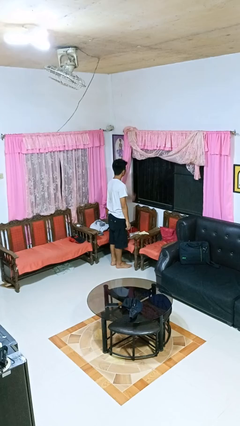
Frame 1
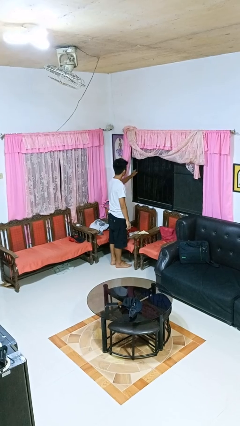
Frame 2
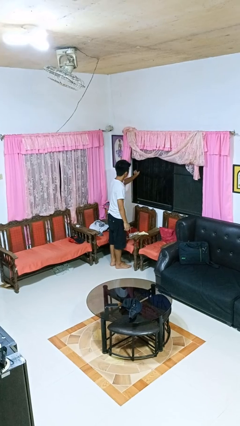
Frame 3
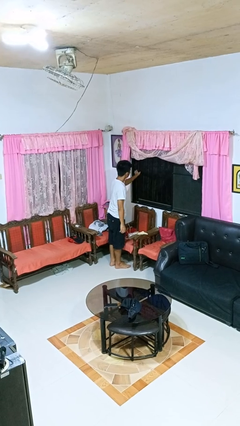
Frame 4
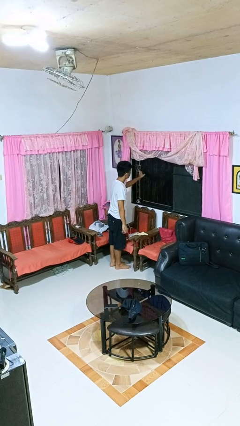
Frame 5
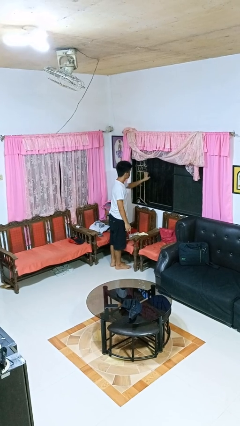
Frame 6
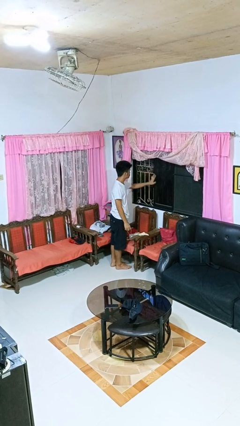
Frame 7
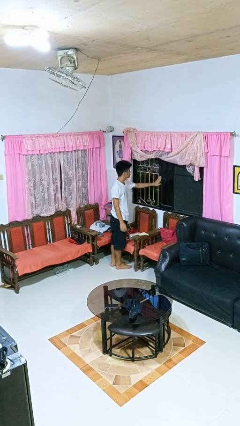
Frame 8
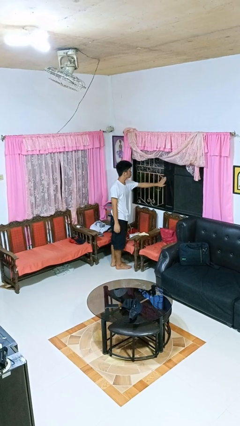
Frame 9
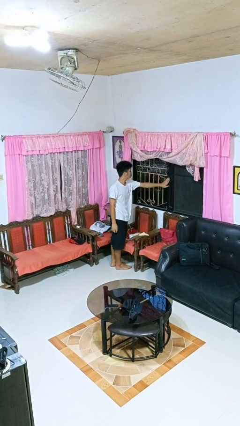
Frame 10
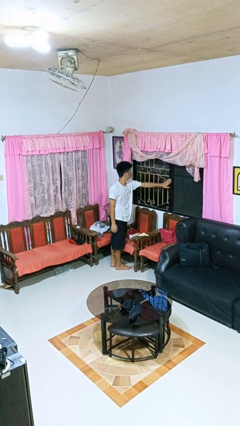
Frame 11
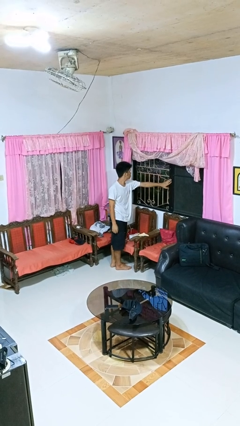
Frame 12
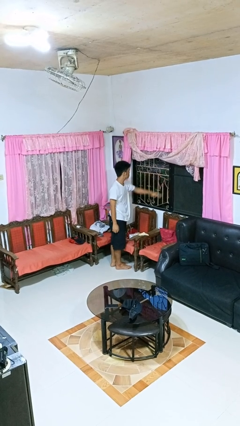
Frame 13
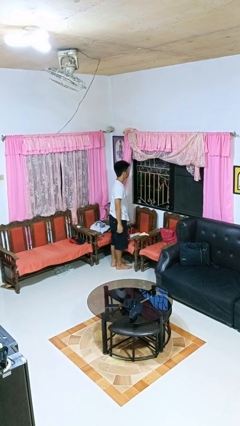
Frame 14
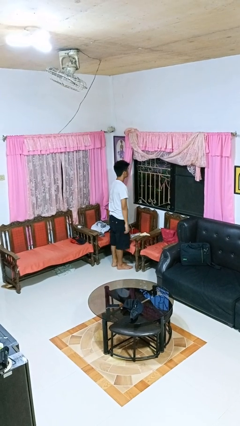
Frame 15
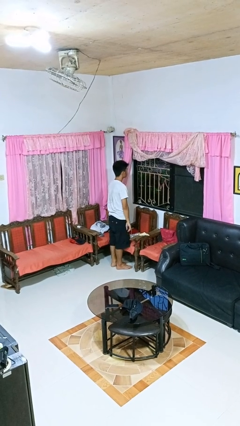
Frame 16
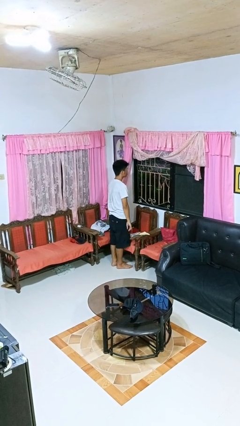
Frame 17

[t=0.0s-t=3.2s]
person opens home window

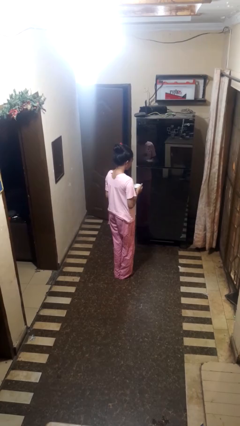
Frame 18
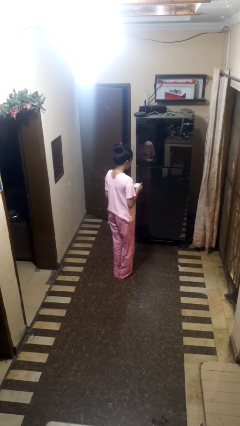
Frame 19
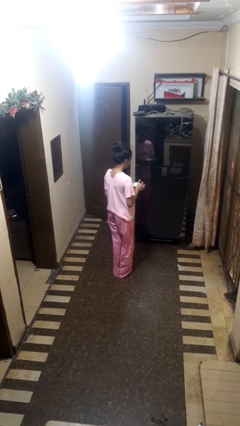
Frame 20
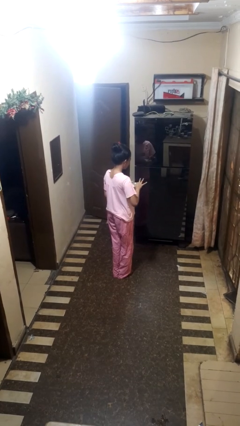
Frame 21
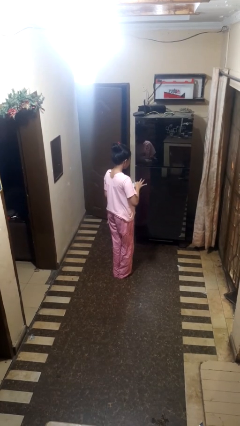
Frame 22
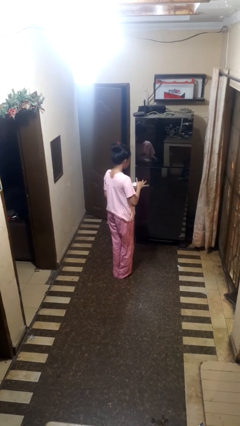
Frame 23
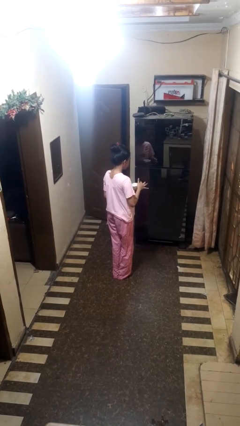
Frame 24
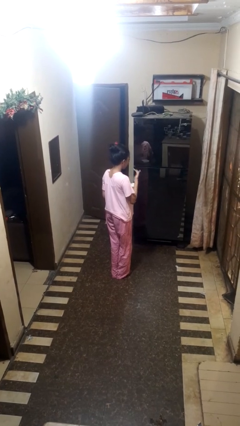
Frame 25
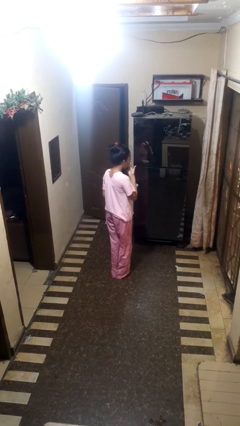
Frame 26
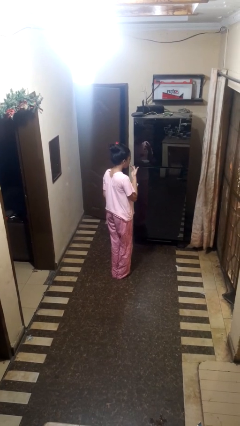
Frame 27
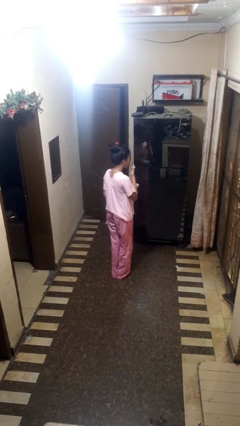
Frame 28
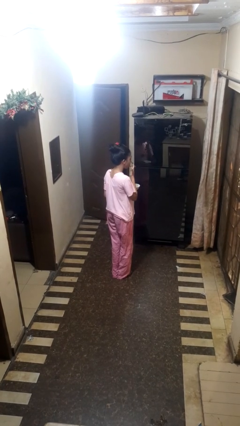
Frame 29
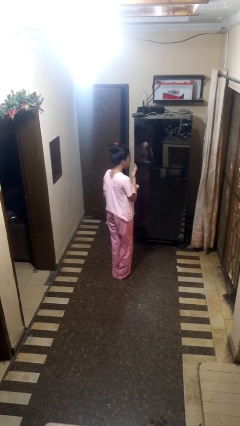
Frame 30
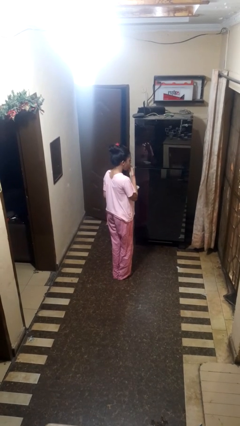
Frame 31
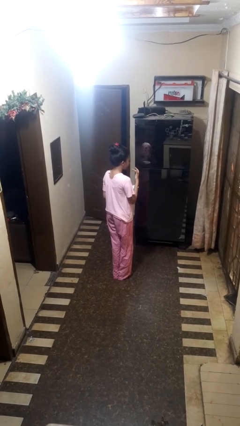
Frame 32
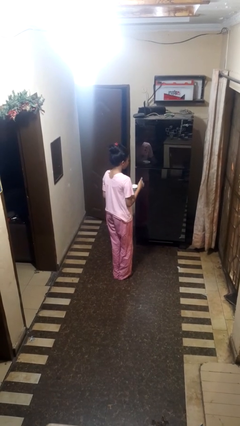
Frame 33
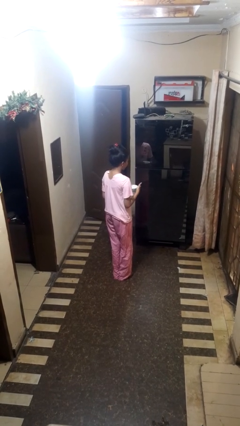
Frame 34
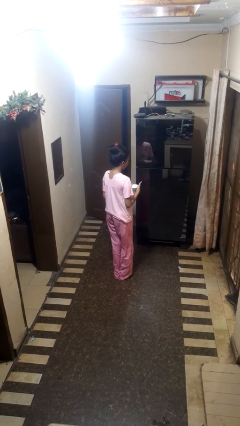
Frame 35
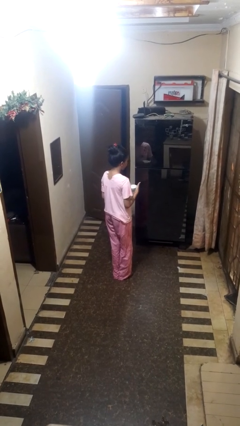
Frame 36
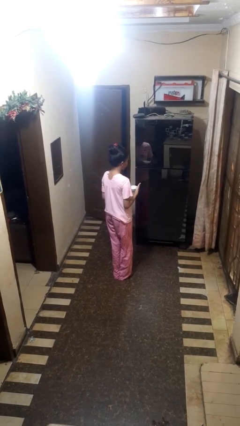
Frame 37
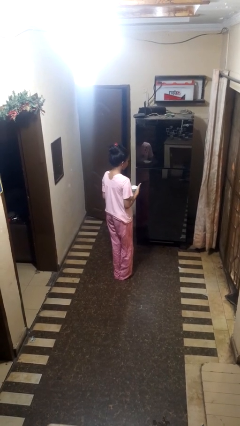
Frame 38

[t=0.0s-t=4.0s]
person licks fingers

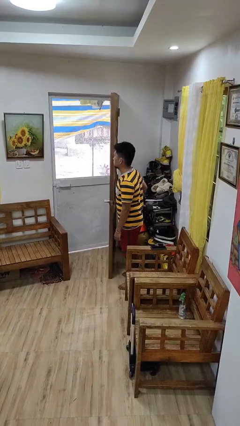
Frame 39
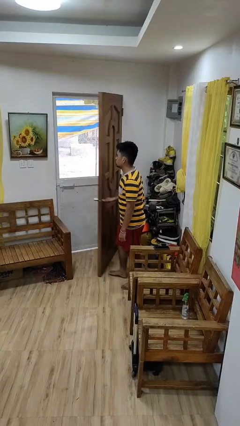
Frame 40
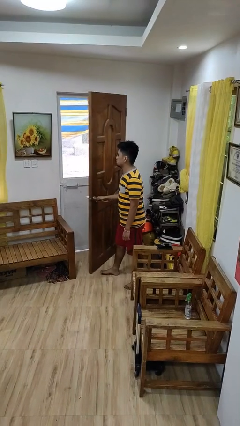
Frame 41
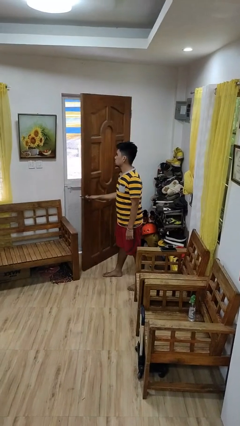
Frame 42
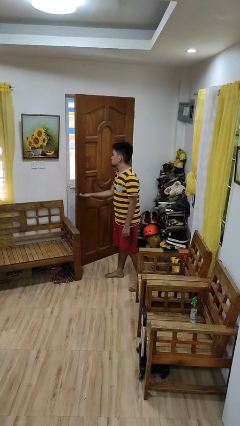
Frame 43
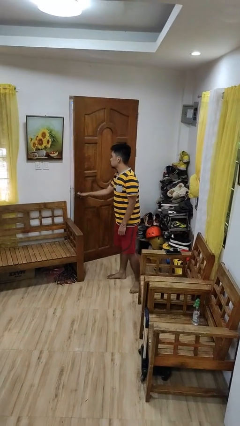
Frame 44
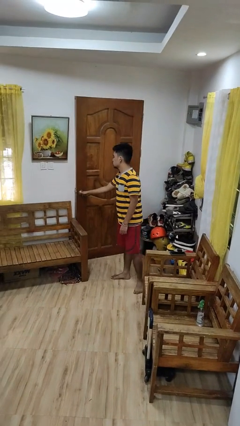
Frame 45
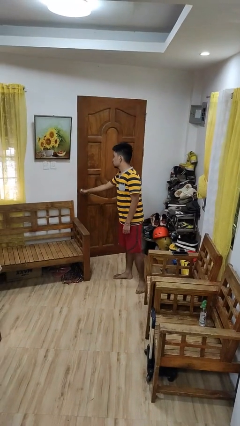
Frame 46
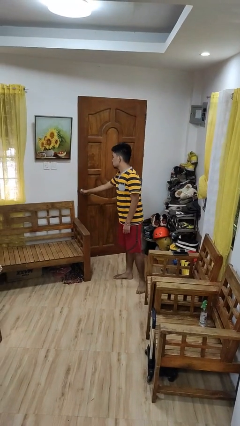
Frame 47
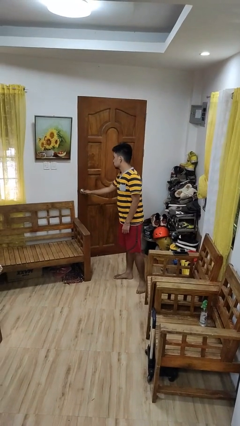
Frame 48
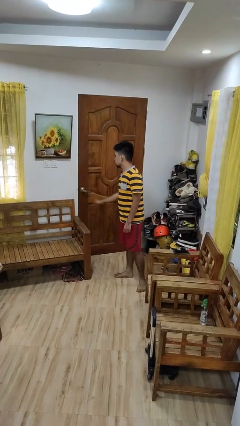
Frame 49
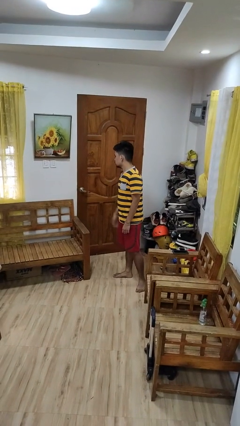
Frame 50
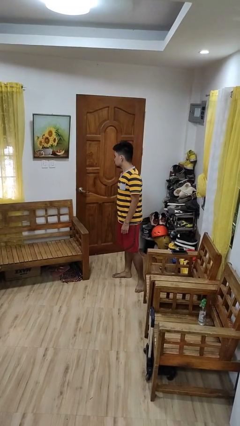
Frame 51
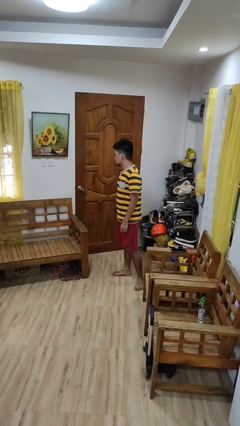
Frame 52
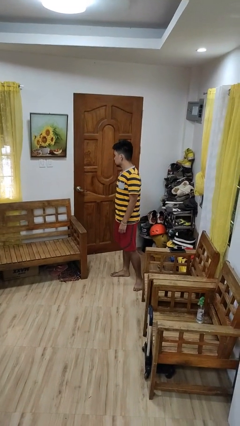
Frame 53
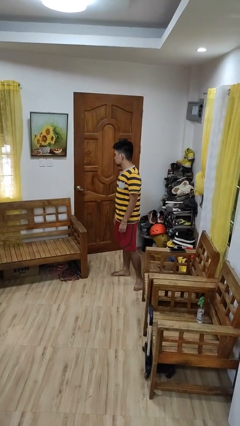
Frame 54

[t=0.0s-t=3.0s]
person closes facility door

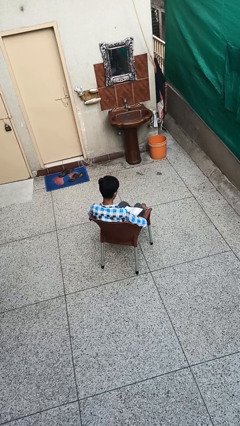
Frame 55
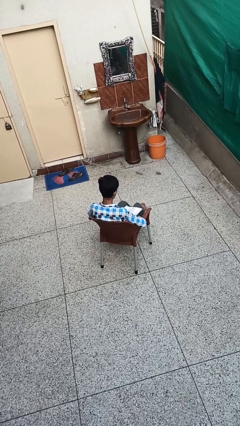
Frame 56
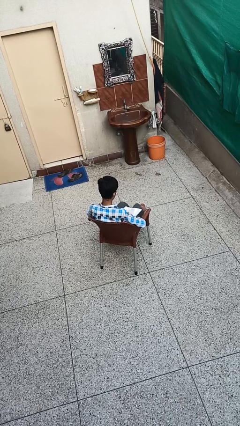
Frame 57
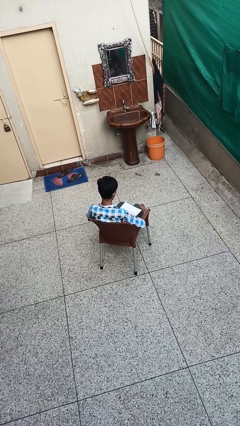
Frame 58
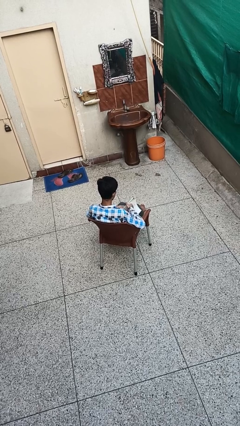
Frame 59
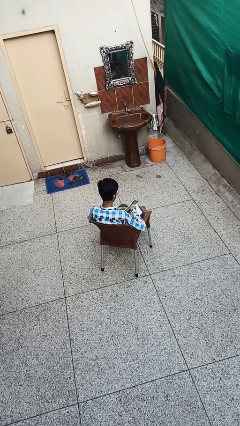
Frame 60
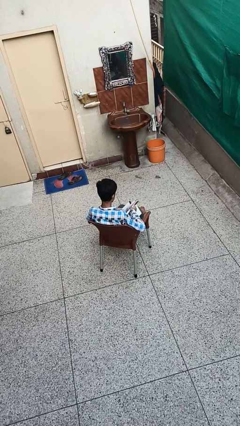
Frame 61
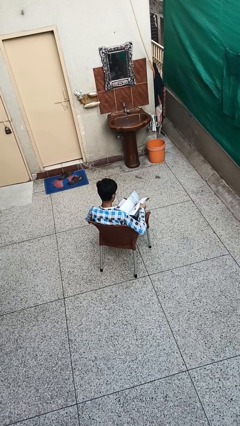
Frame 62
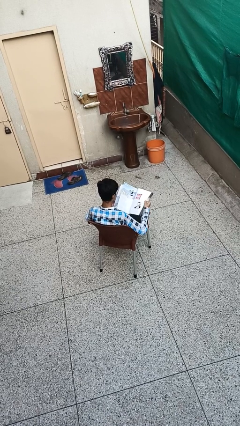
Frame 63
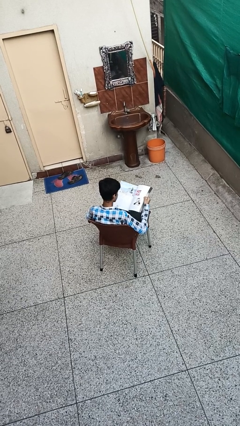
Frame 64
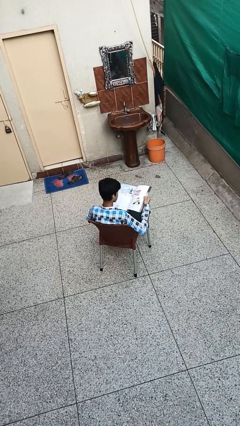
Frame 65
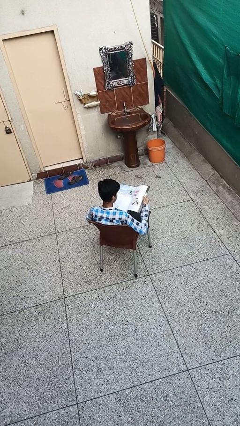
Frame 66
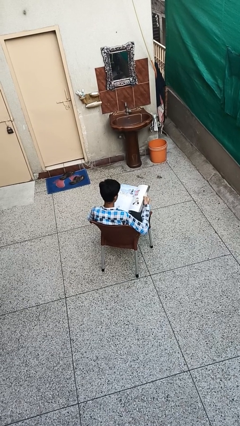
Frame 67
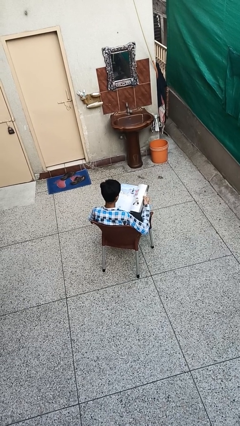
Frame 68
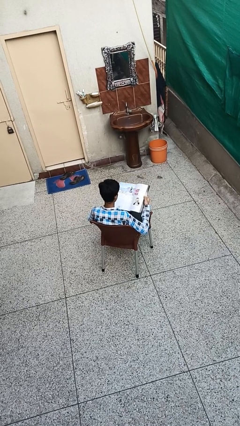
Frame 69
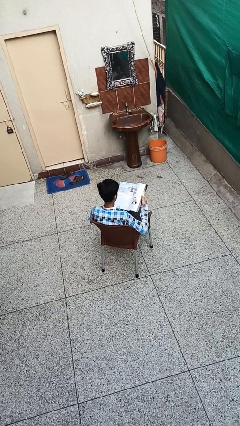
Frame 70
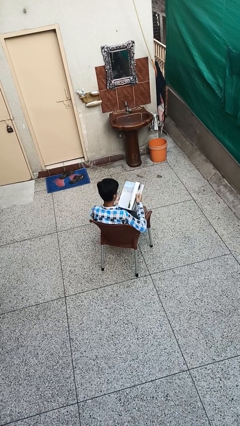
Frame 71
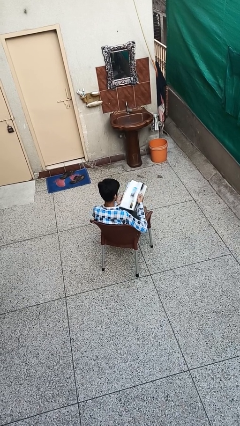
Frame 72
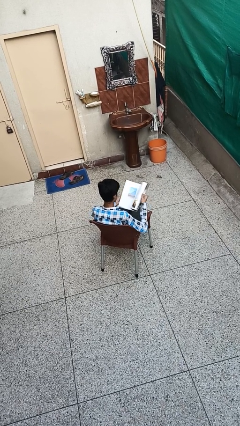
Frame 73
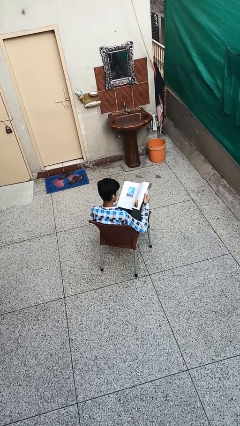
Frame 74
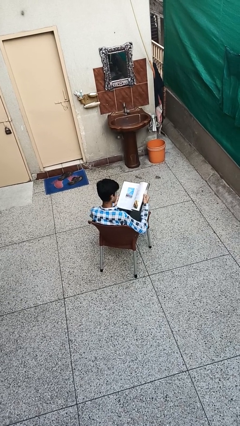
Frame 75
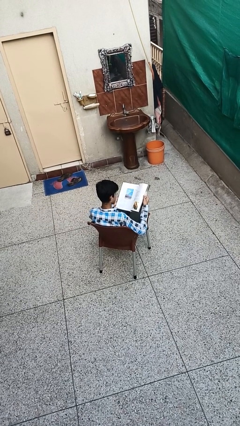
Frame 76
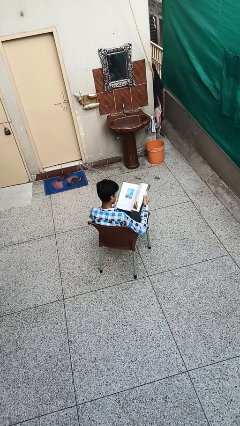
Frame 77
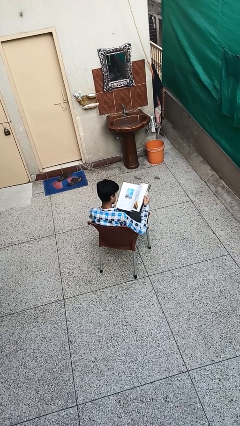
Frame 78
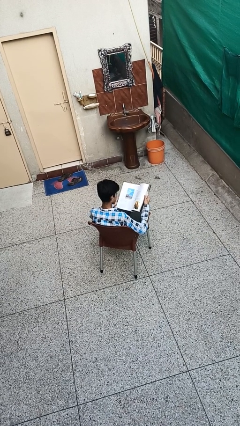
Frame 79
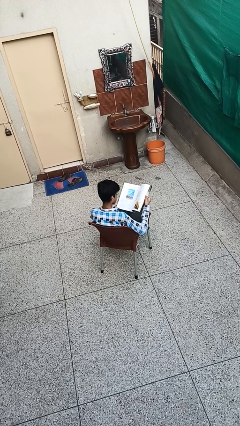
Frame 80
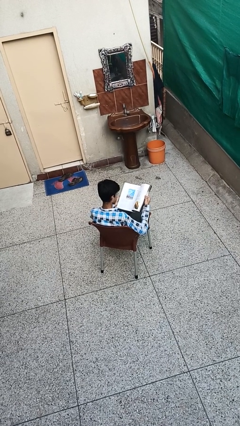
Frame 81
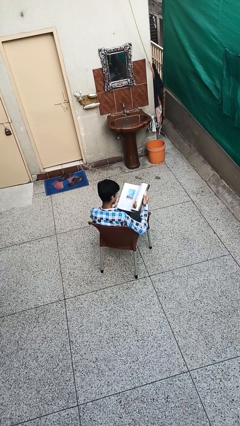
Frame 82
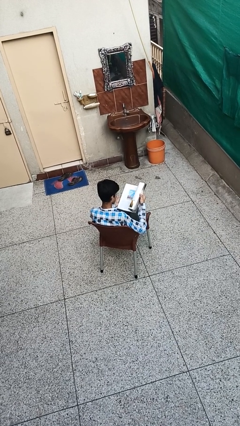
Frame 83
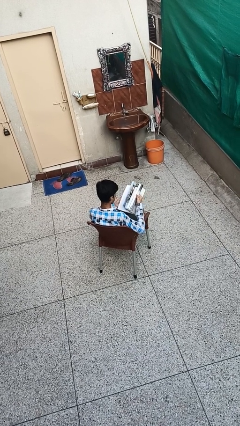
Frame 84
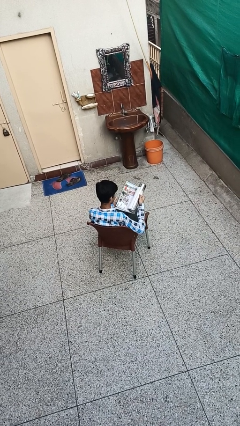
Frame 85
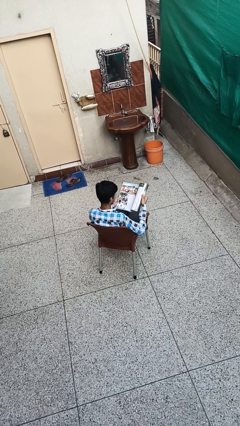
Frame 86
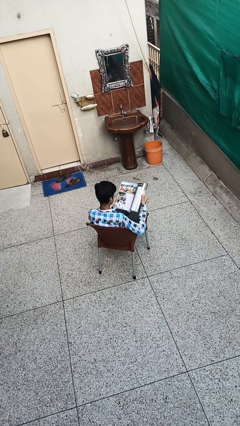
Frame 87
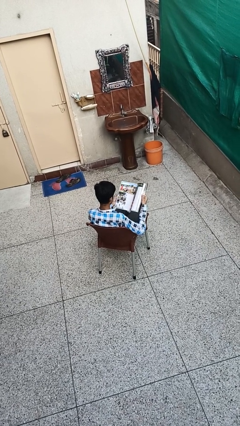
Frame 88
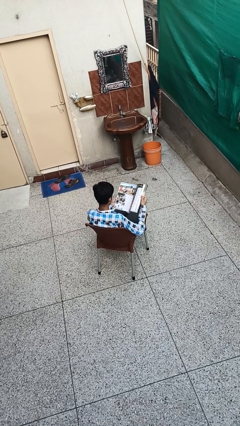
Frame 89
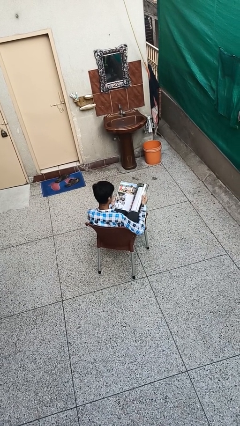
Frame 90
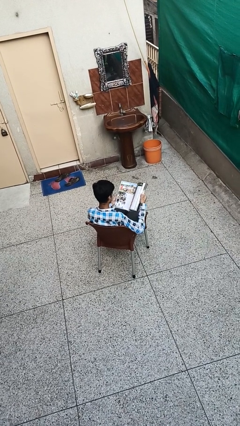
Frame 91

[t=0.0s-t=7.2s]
person reads magazine
